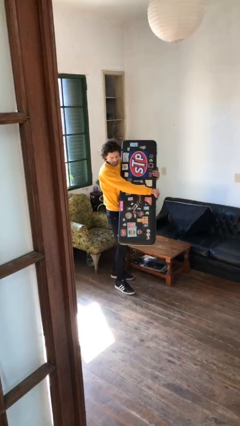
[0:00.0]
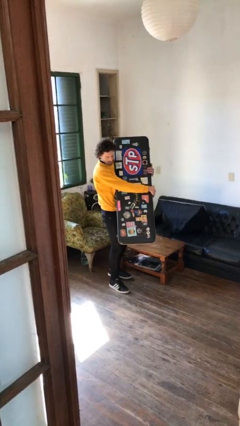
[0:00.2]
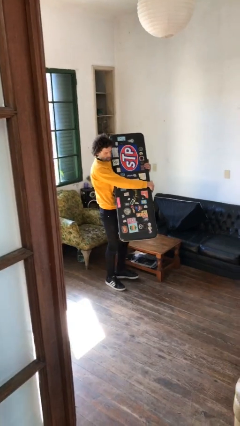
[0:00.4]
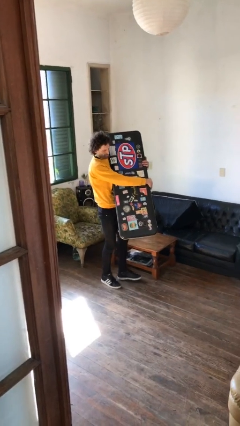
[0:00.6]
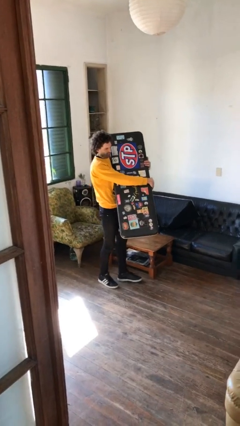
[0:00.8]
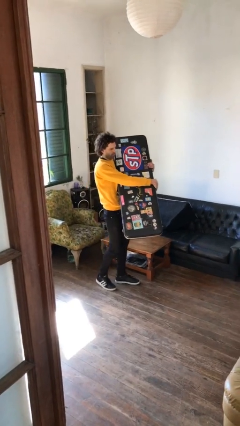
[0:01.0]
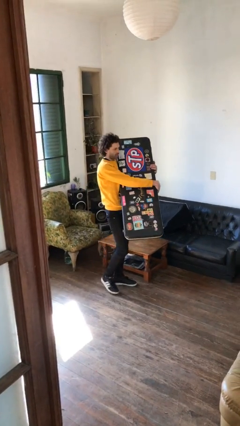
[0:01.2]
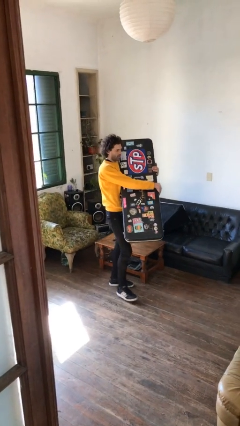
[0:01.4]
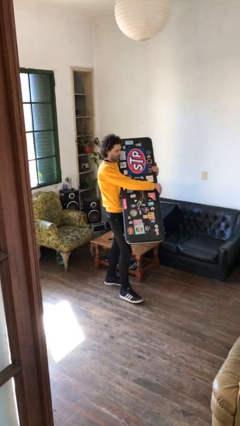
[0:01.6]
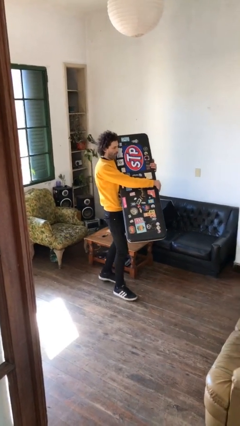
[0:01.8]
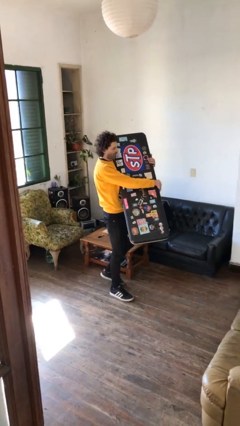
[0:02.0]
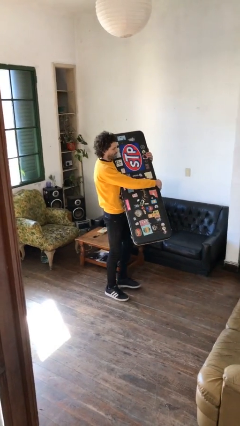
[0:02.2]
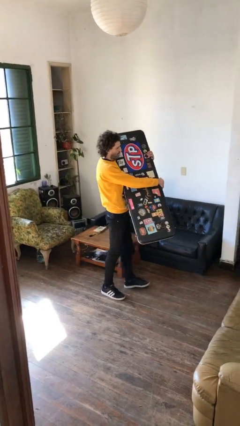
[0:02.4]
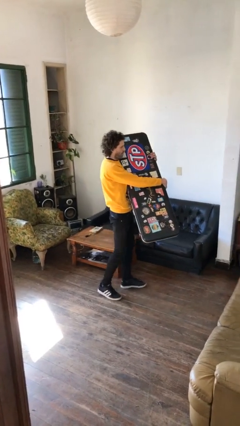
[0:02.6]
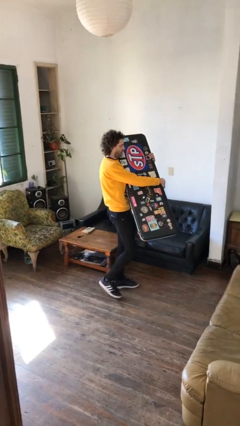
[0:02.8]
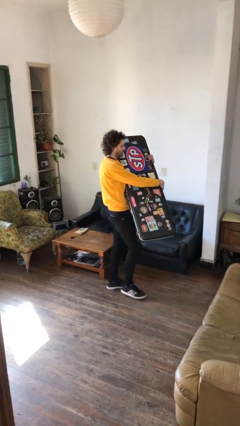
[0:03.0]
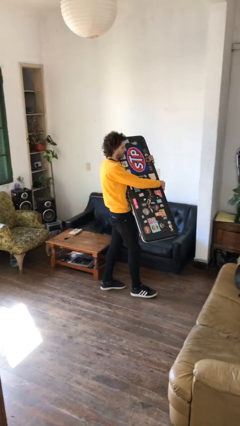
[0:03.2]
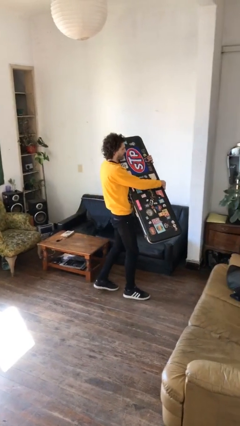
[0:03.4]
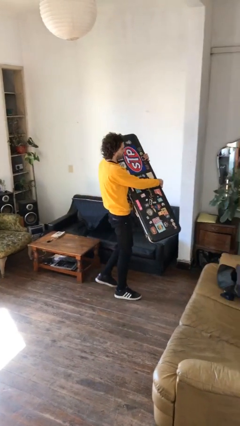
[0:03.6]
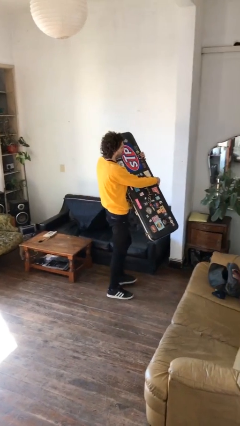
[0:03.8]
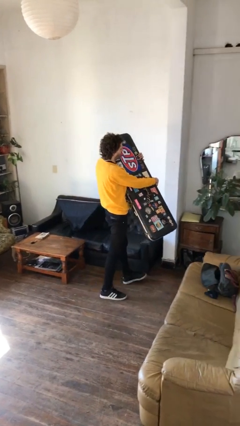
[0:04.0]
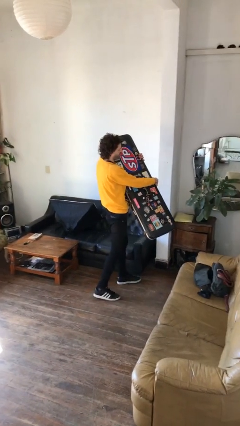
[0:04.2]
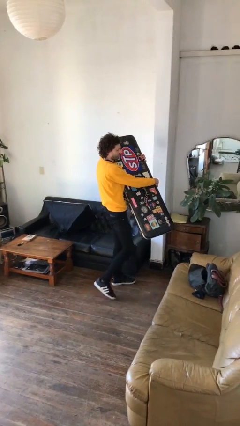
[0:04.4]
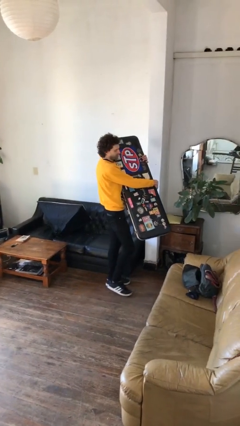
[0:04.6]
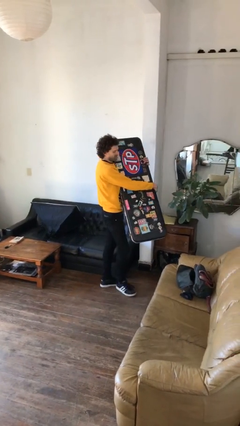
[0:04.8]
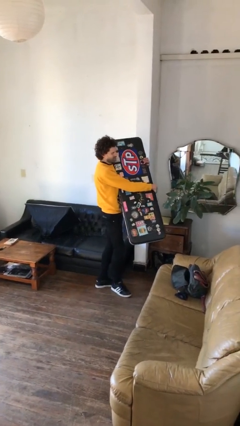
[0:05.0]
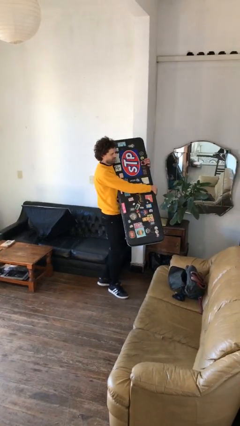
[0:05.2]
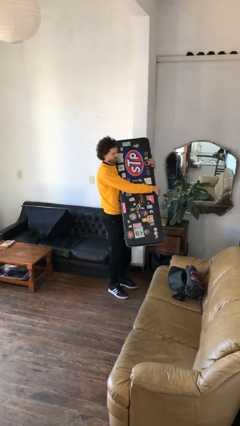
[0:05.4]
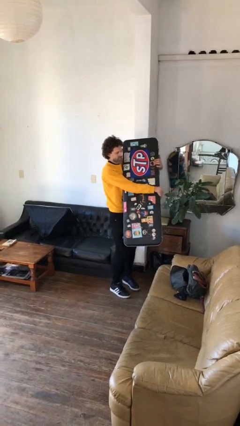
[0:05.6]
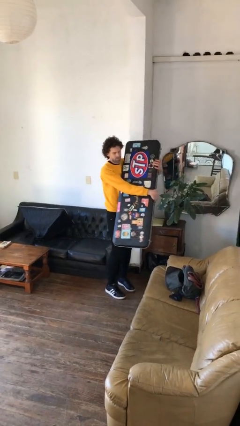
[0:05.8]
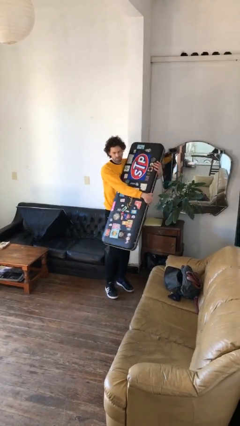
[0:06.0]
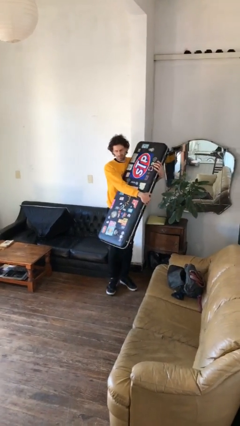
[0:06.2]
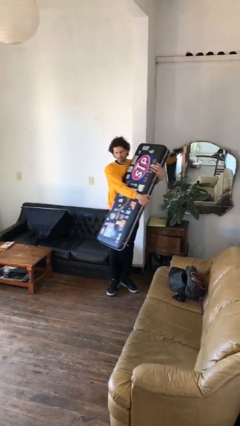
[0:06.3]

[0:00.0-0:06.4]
person carries heavy object

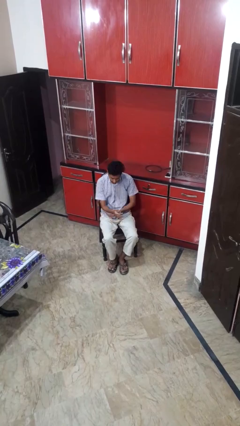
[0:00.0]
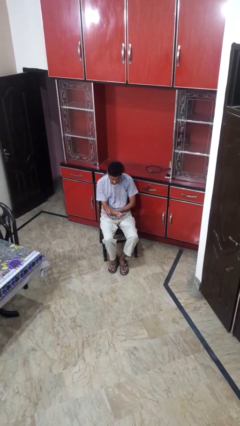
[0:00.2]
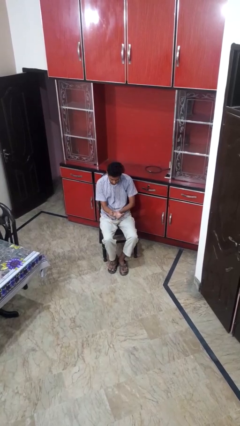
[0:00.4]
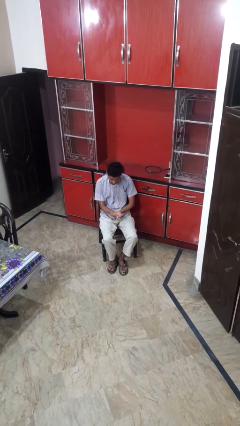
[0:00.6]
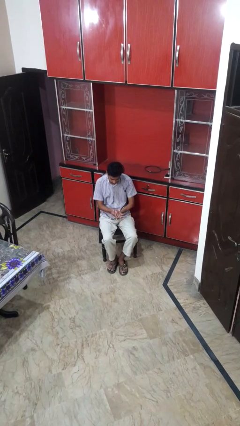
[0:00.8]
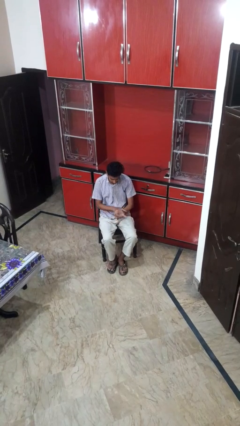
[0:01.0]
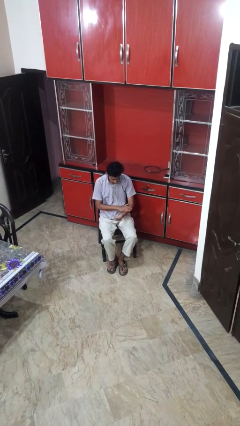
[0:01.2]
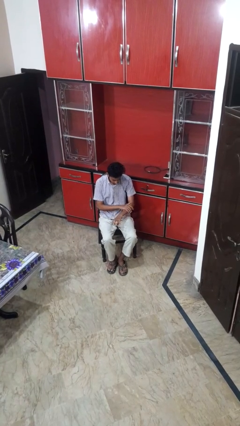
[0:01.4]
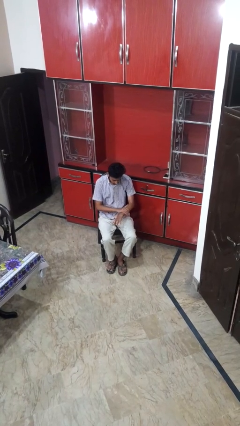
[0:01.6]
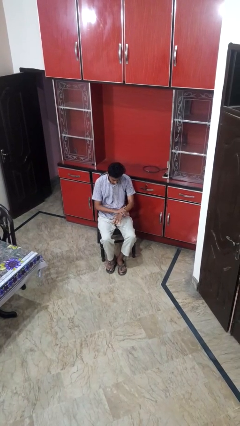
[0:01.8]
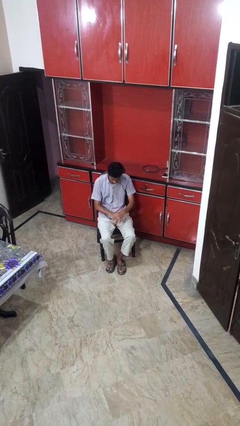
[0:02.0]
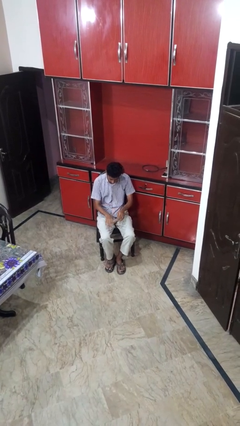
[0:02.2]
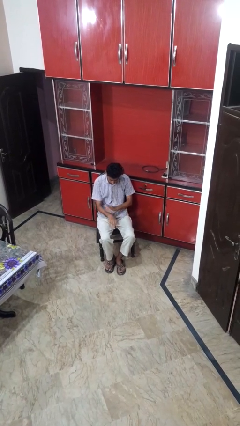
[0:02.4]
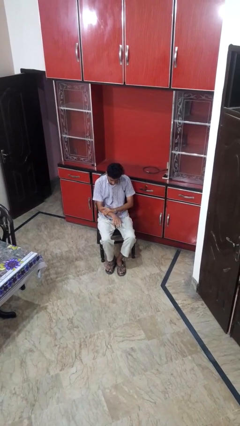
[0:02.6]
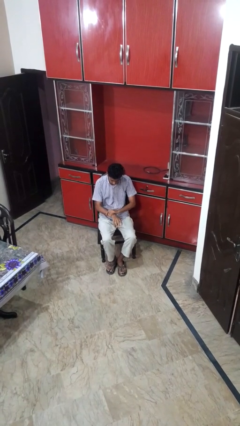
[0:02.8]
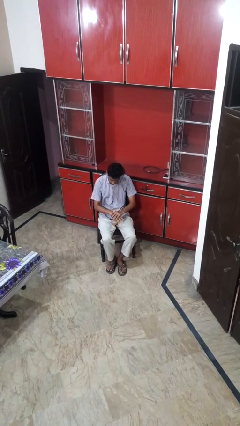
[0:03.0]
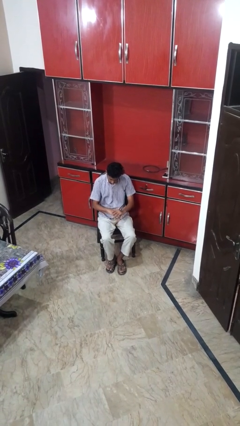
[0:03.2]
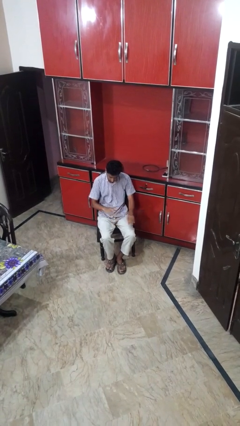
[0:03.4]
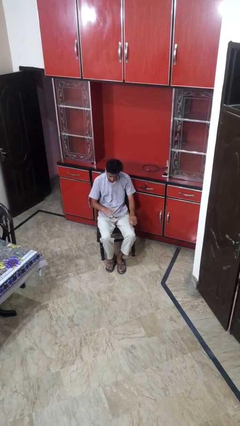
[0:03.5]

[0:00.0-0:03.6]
person looks at hands in lap

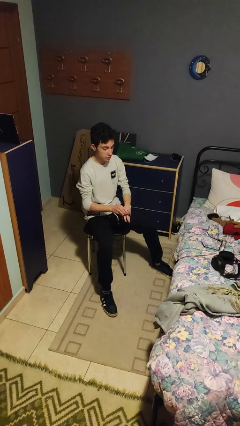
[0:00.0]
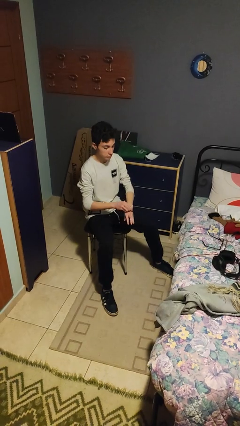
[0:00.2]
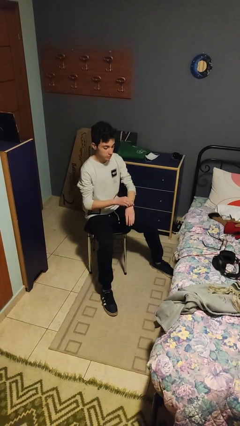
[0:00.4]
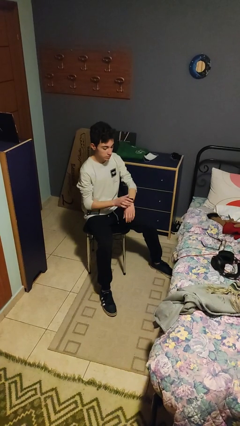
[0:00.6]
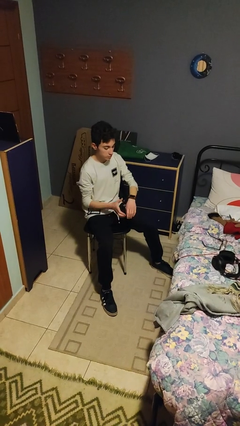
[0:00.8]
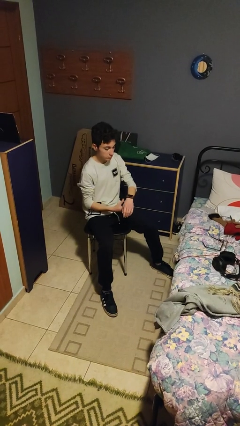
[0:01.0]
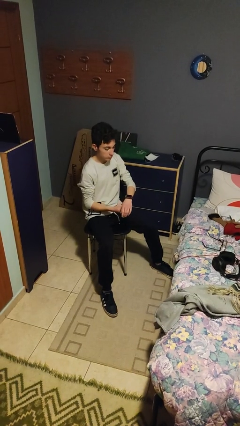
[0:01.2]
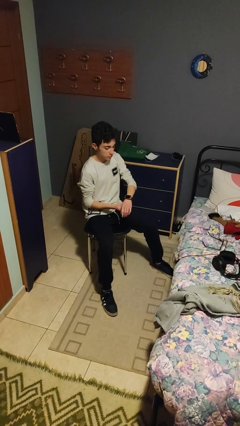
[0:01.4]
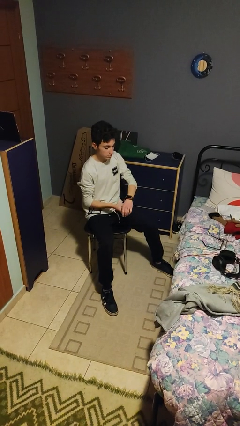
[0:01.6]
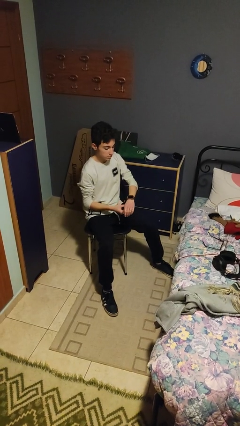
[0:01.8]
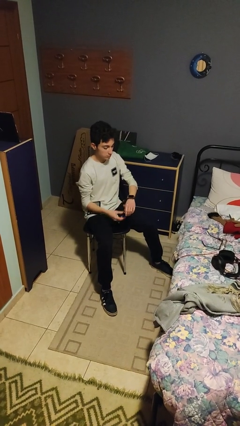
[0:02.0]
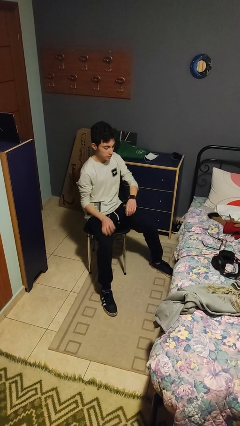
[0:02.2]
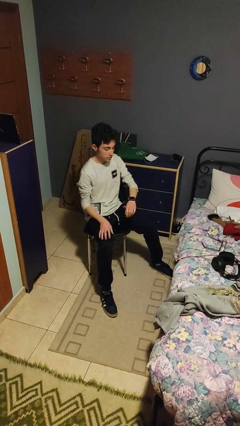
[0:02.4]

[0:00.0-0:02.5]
person puts on wristwatch

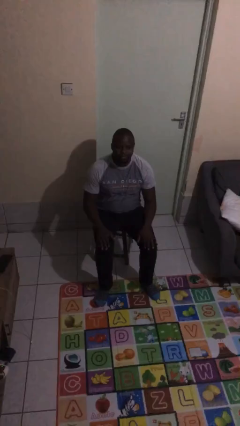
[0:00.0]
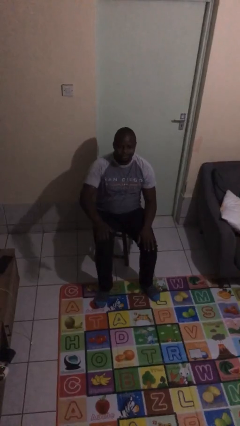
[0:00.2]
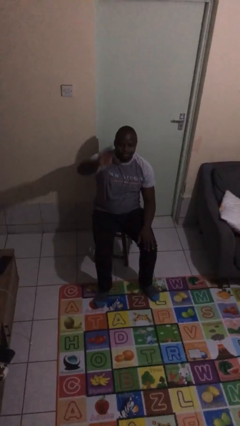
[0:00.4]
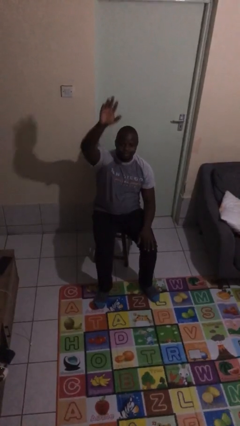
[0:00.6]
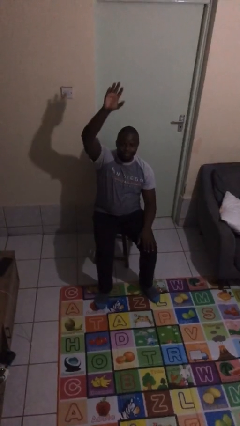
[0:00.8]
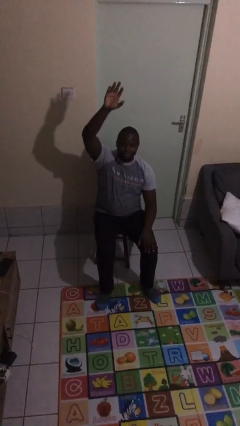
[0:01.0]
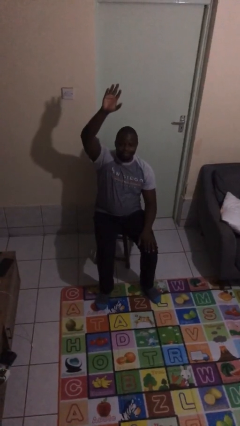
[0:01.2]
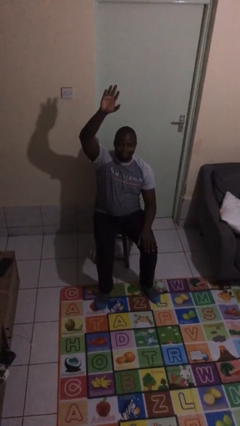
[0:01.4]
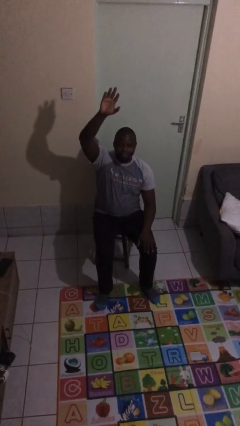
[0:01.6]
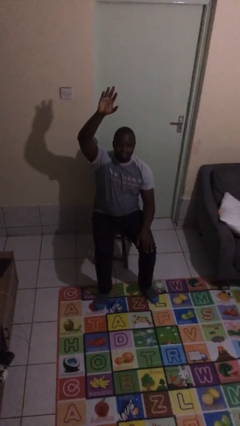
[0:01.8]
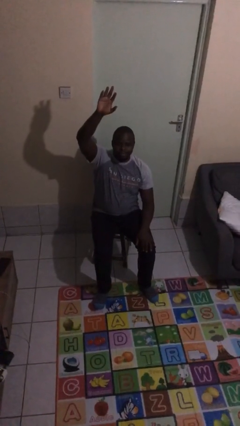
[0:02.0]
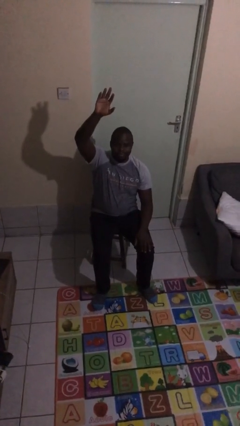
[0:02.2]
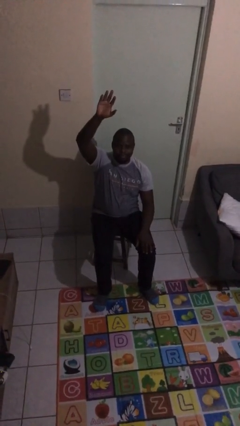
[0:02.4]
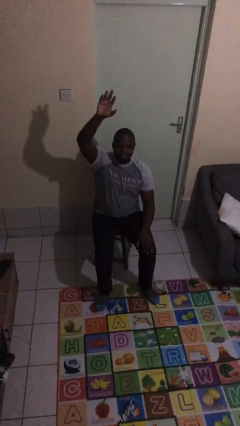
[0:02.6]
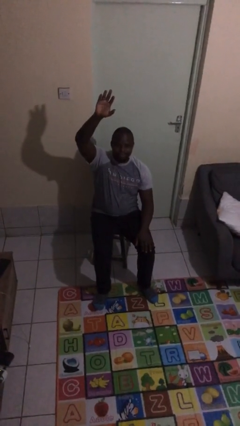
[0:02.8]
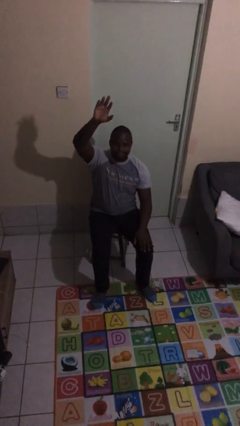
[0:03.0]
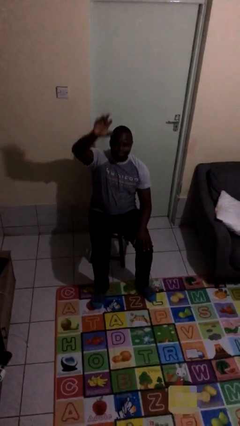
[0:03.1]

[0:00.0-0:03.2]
person gestures raise hand

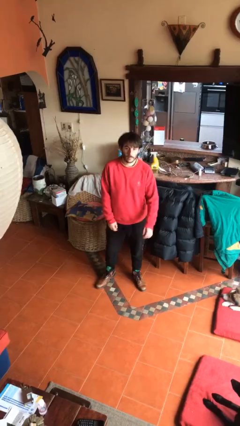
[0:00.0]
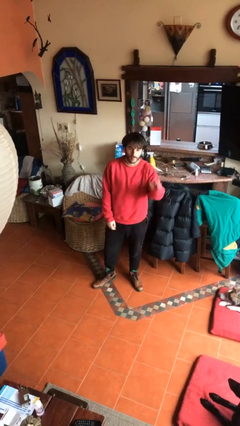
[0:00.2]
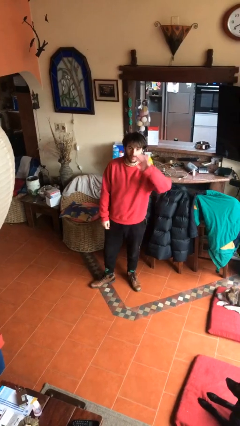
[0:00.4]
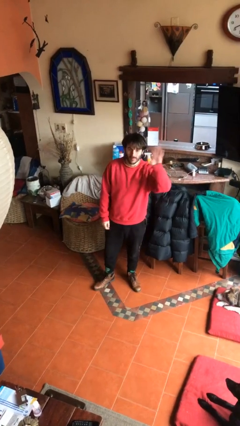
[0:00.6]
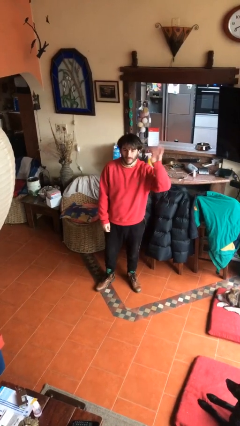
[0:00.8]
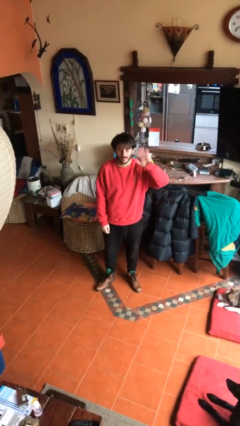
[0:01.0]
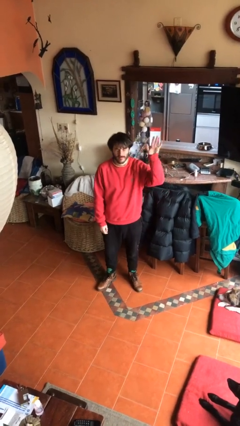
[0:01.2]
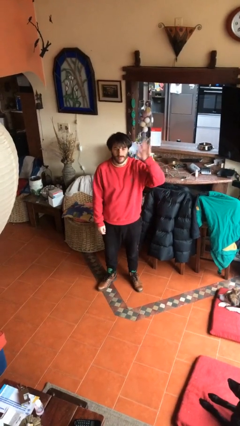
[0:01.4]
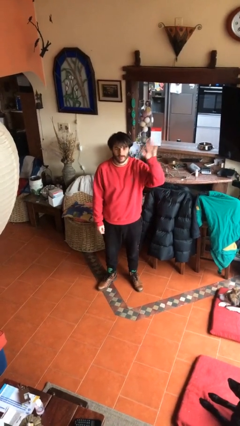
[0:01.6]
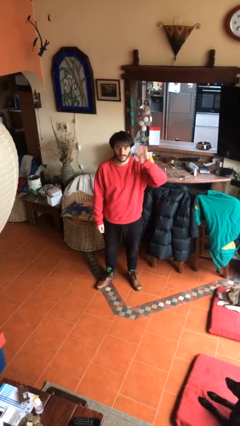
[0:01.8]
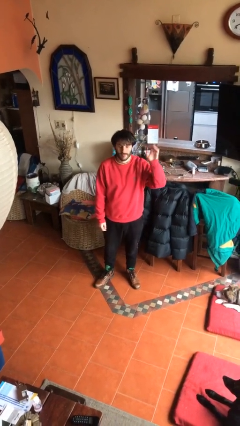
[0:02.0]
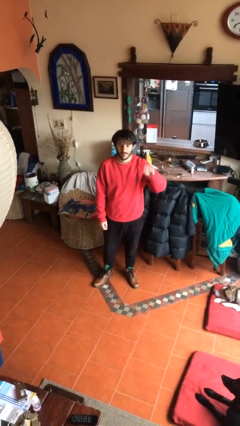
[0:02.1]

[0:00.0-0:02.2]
person waves at person
